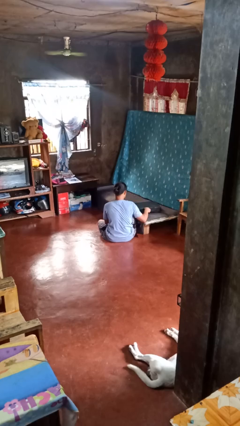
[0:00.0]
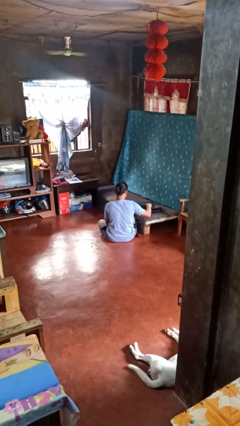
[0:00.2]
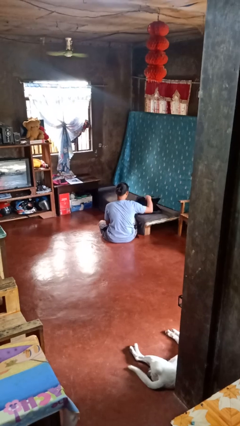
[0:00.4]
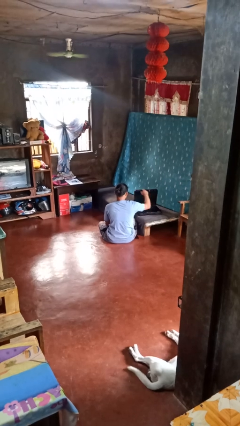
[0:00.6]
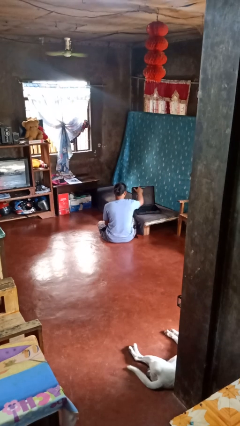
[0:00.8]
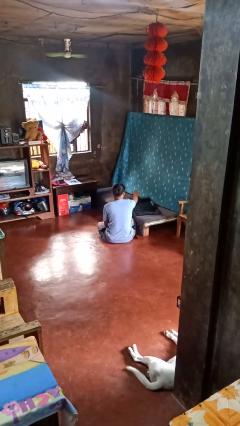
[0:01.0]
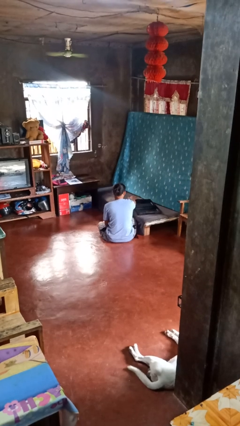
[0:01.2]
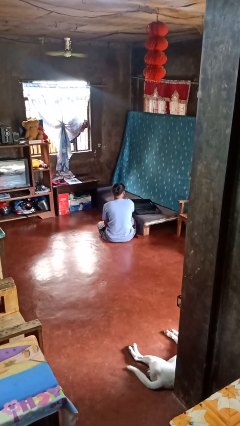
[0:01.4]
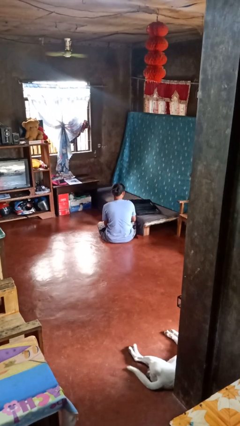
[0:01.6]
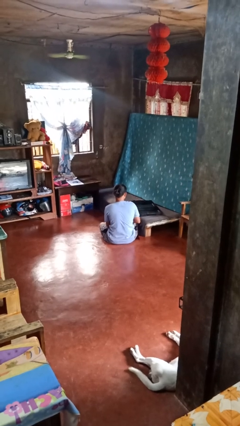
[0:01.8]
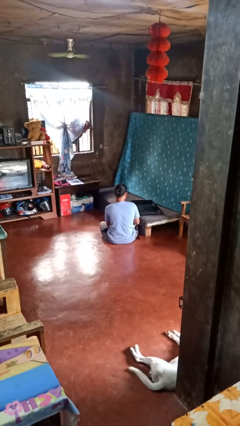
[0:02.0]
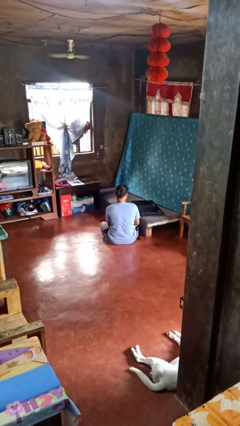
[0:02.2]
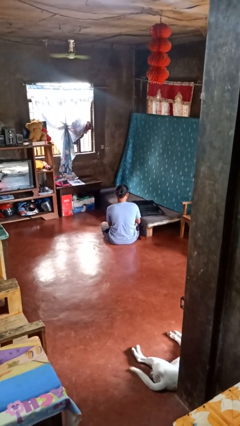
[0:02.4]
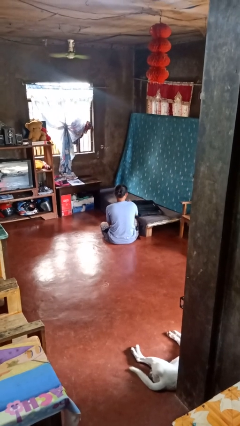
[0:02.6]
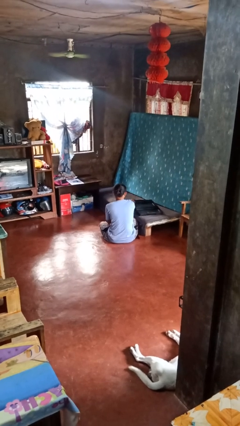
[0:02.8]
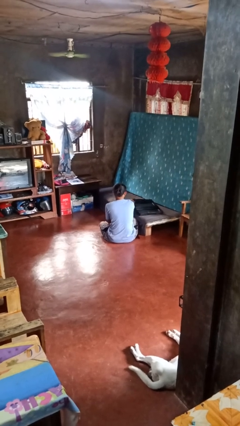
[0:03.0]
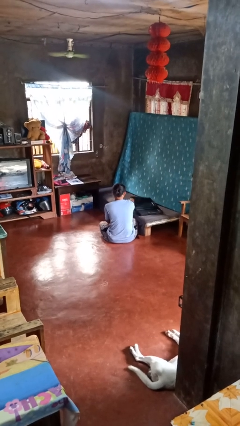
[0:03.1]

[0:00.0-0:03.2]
person opens suitcase

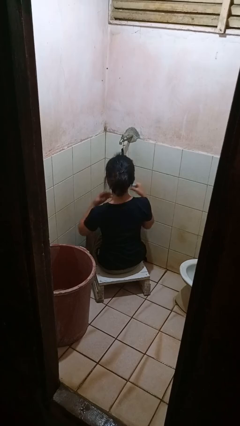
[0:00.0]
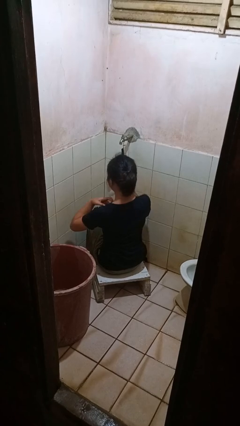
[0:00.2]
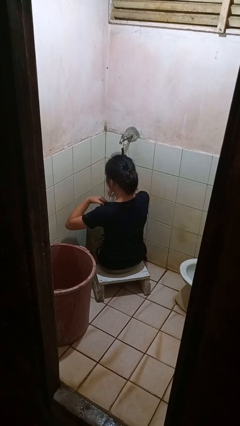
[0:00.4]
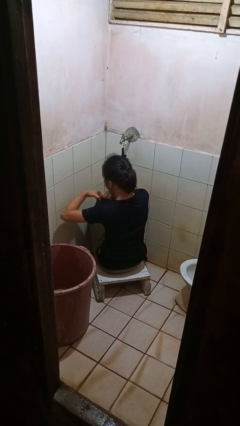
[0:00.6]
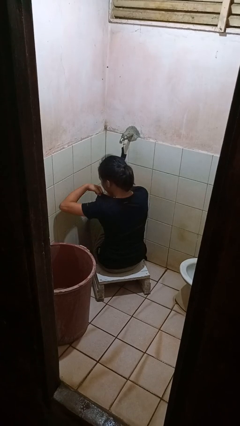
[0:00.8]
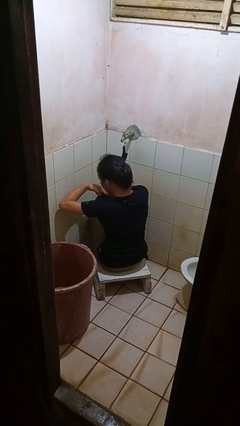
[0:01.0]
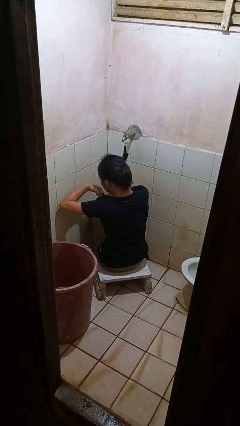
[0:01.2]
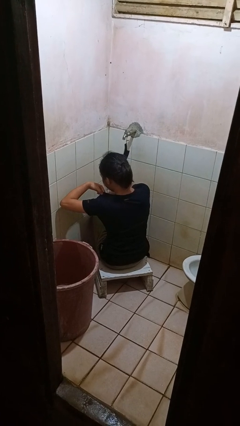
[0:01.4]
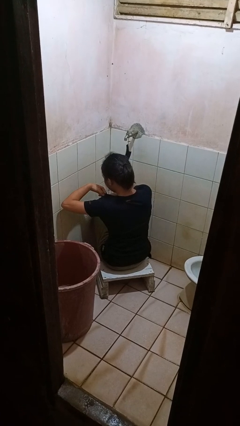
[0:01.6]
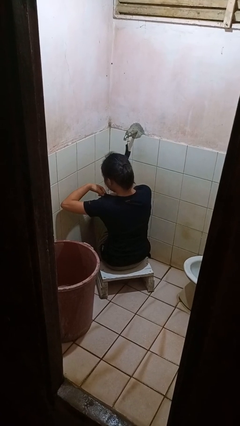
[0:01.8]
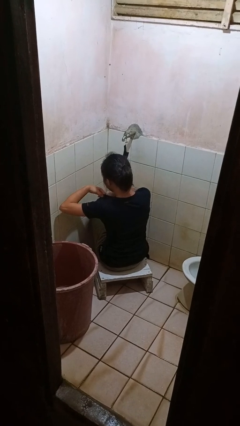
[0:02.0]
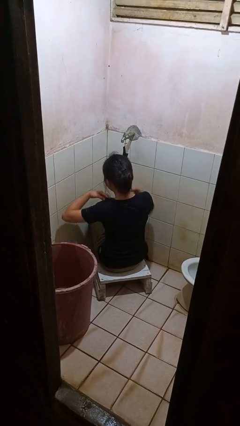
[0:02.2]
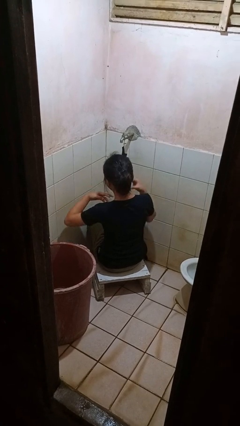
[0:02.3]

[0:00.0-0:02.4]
person applies deodorant

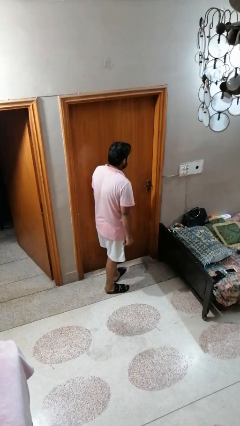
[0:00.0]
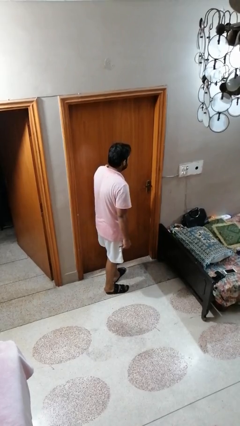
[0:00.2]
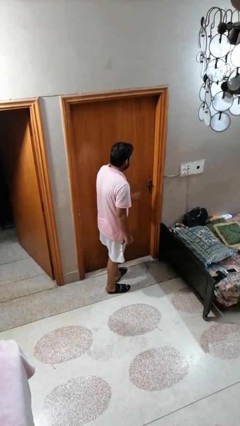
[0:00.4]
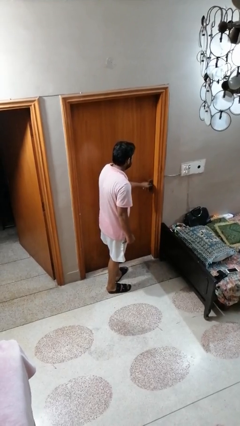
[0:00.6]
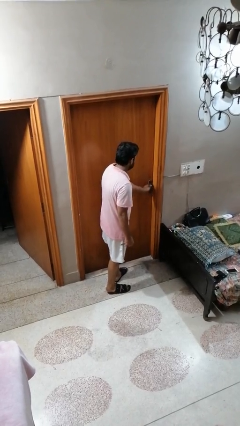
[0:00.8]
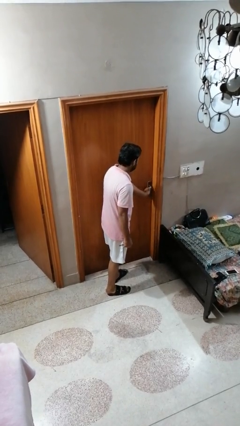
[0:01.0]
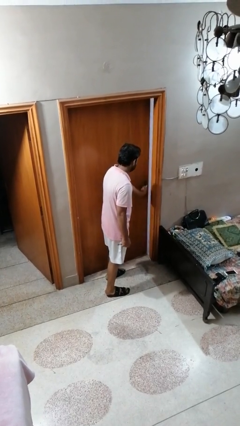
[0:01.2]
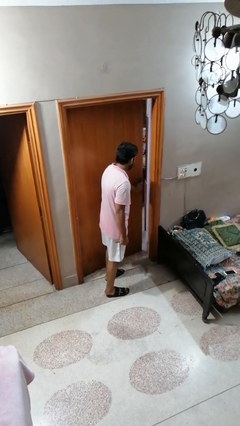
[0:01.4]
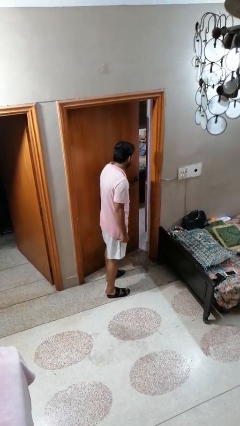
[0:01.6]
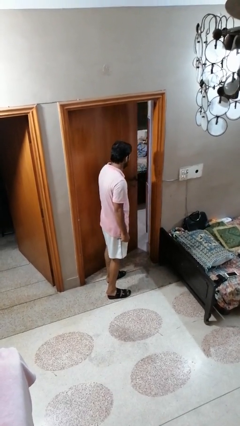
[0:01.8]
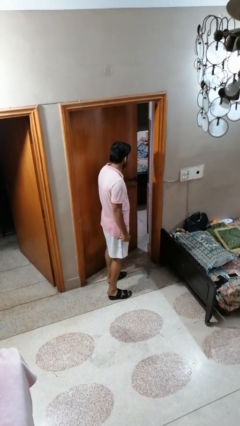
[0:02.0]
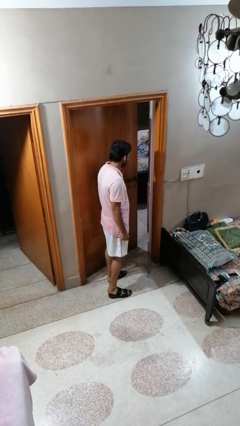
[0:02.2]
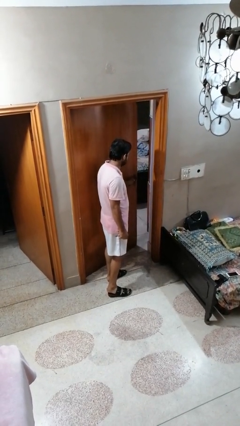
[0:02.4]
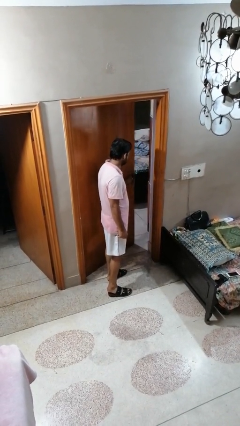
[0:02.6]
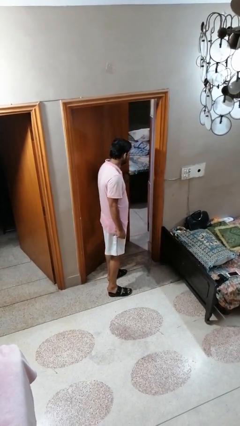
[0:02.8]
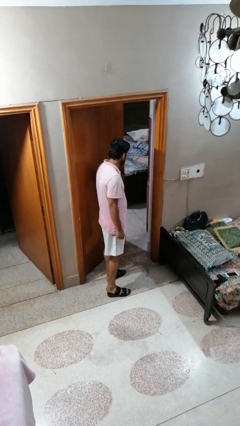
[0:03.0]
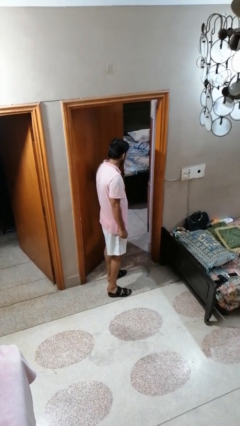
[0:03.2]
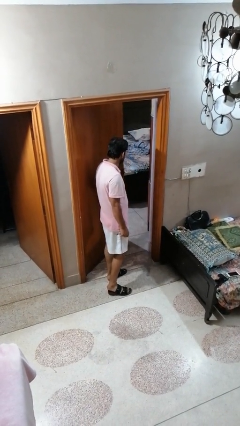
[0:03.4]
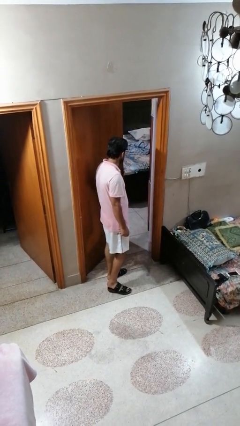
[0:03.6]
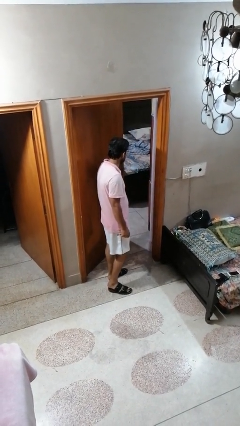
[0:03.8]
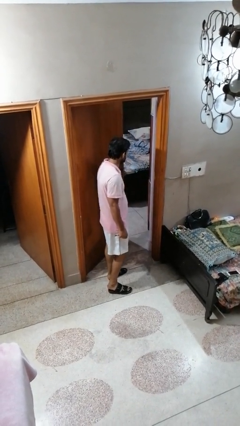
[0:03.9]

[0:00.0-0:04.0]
person opens facility door

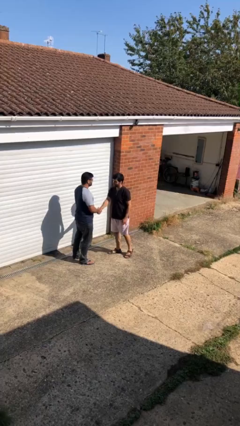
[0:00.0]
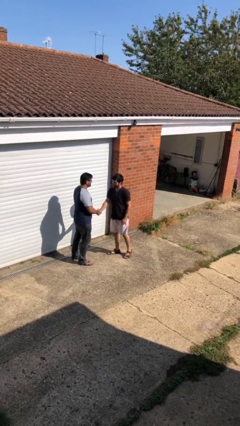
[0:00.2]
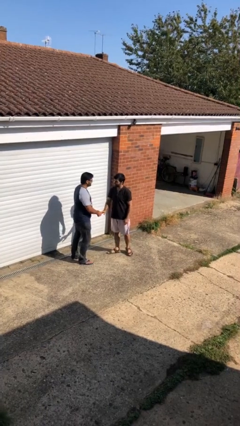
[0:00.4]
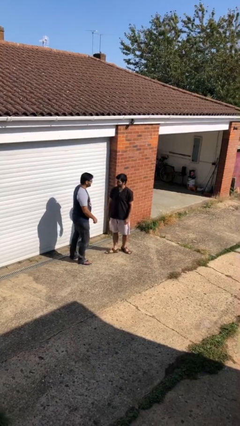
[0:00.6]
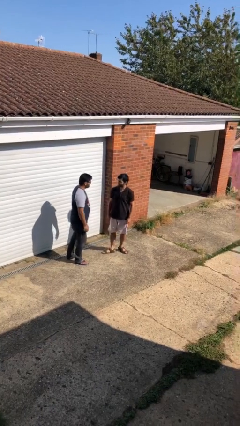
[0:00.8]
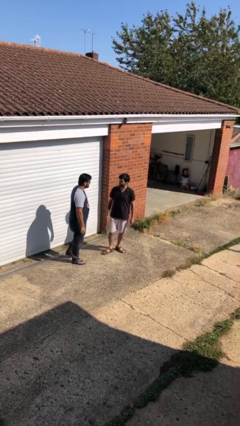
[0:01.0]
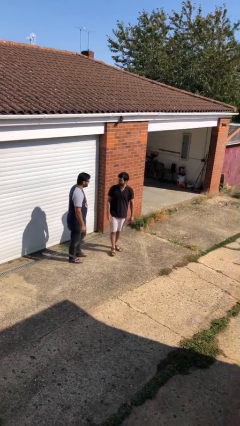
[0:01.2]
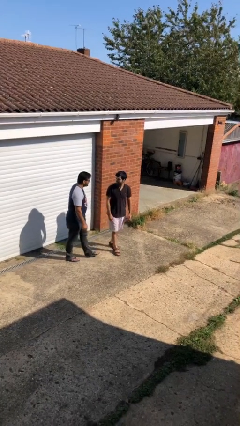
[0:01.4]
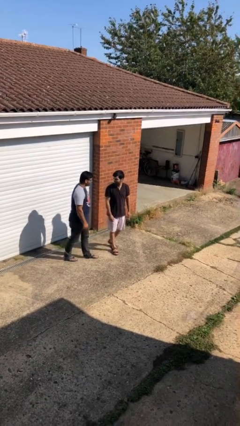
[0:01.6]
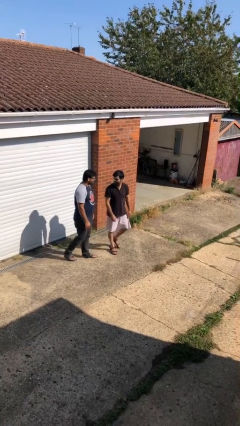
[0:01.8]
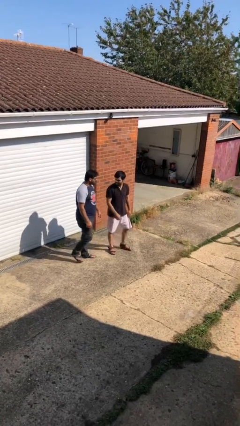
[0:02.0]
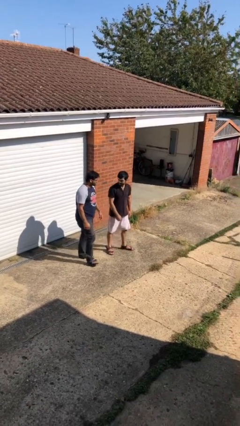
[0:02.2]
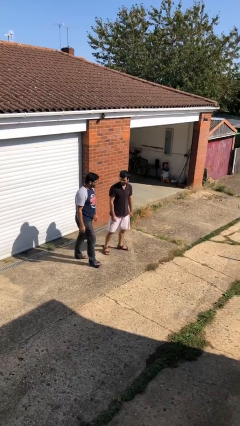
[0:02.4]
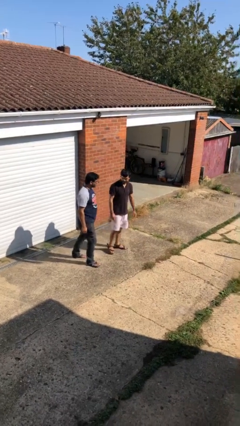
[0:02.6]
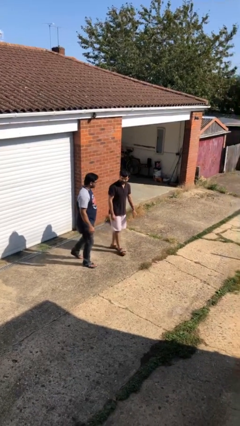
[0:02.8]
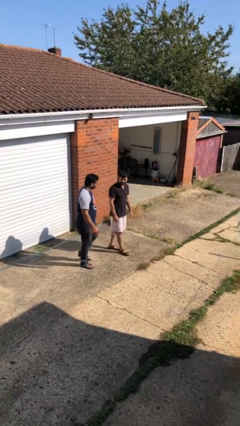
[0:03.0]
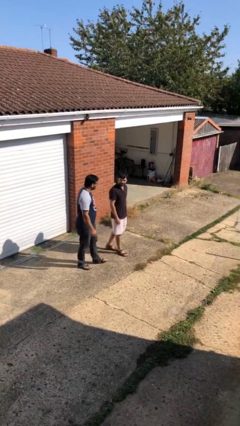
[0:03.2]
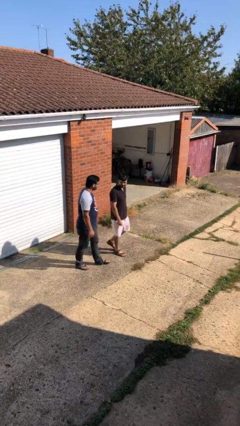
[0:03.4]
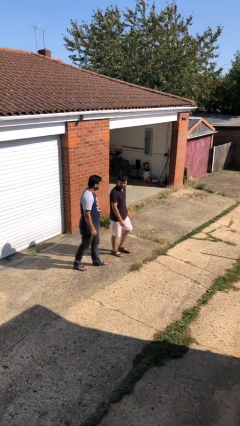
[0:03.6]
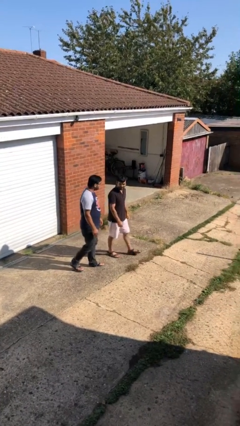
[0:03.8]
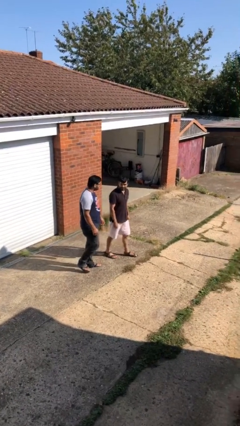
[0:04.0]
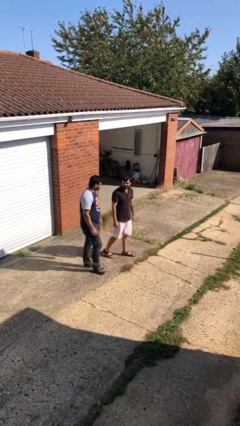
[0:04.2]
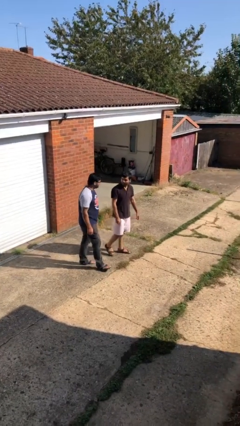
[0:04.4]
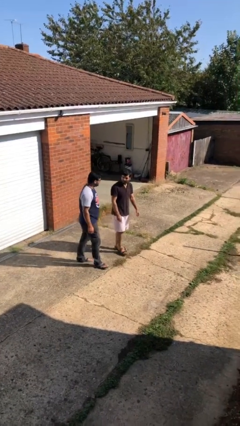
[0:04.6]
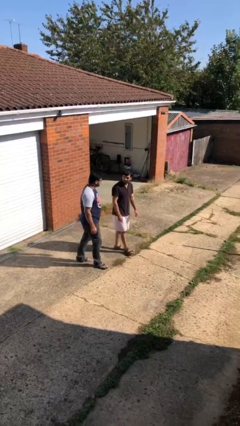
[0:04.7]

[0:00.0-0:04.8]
person talks to person

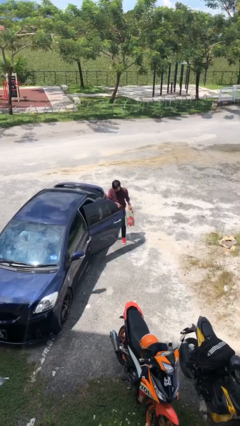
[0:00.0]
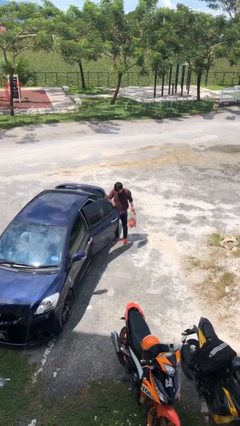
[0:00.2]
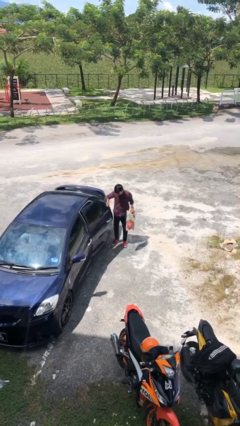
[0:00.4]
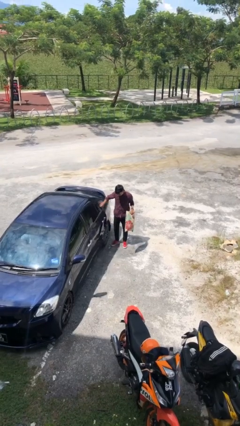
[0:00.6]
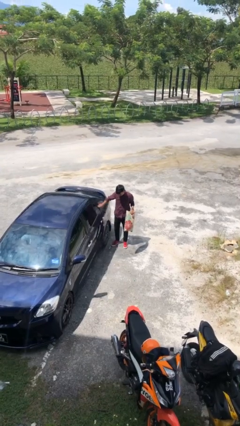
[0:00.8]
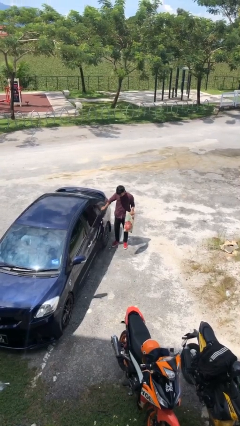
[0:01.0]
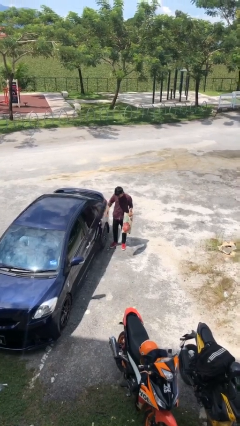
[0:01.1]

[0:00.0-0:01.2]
person closes car door

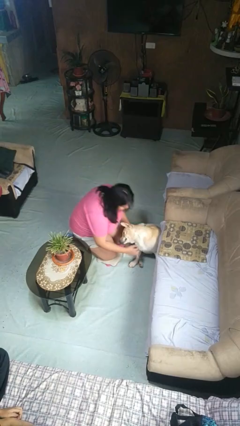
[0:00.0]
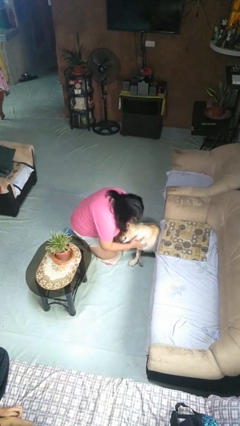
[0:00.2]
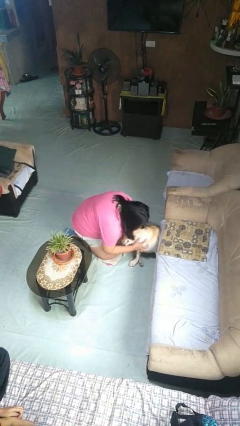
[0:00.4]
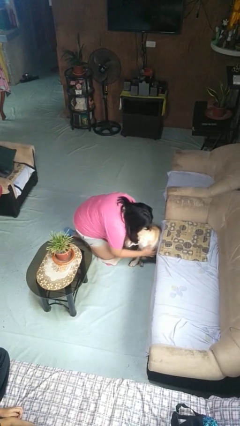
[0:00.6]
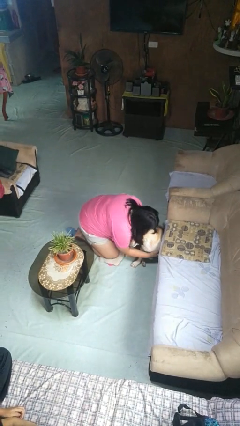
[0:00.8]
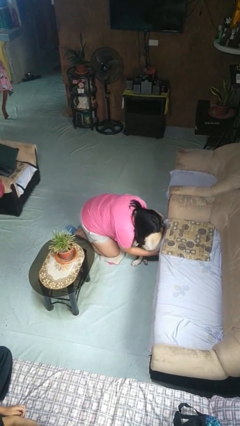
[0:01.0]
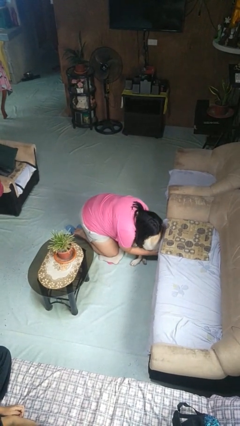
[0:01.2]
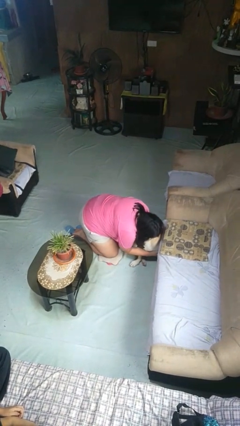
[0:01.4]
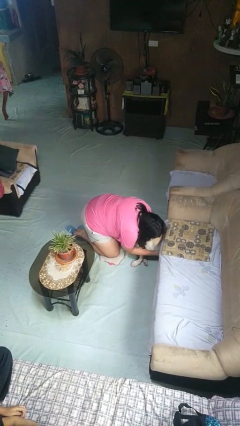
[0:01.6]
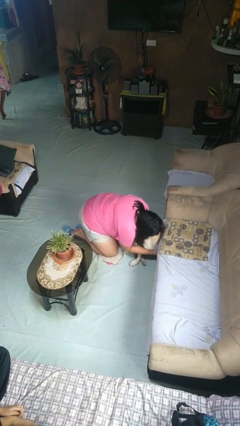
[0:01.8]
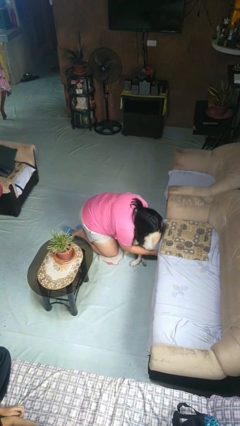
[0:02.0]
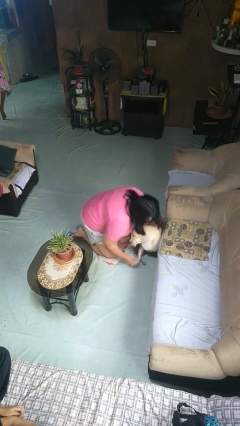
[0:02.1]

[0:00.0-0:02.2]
person hugs dog
